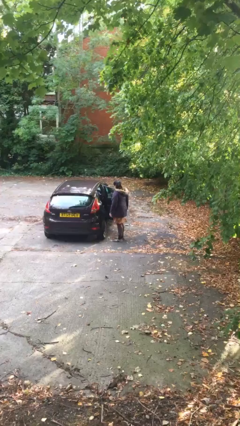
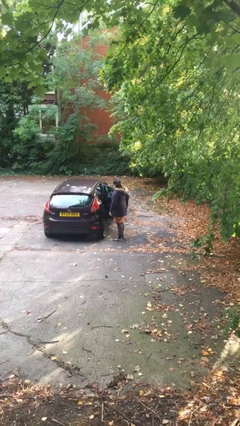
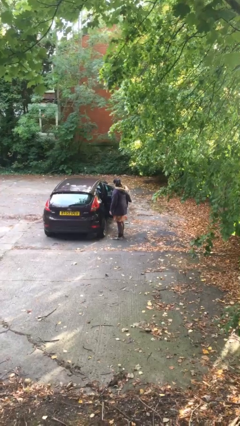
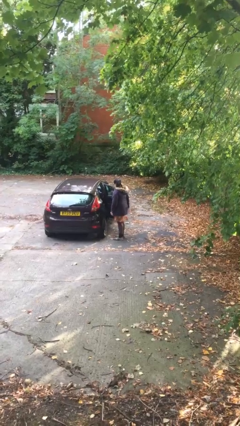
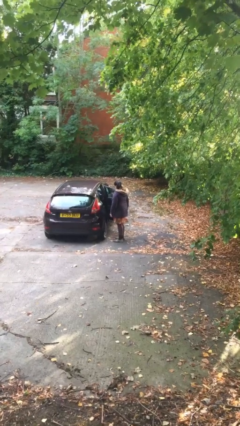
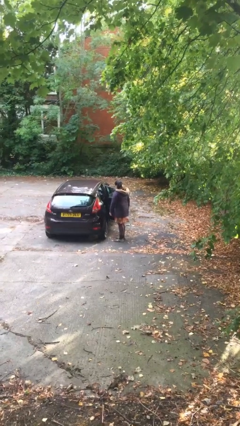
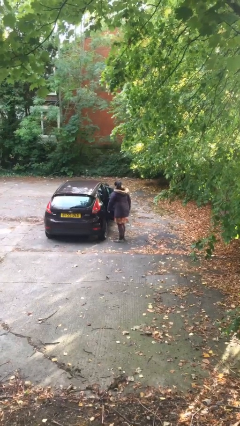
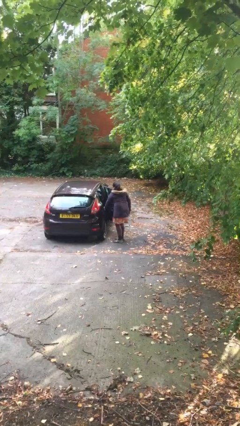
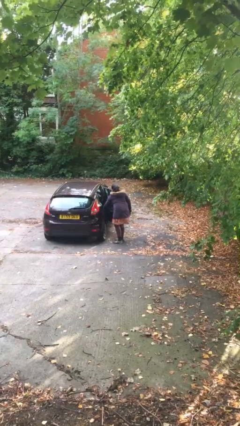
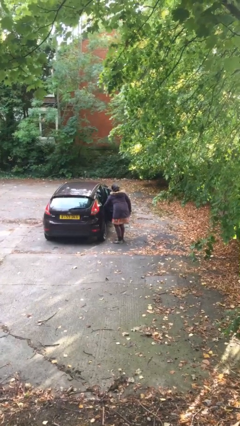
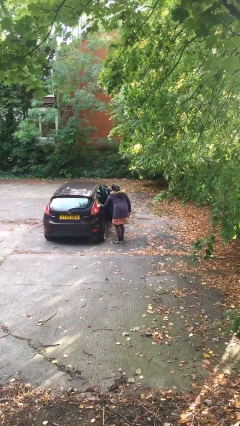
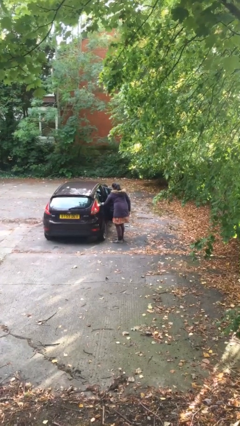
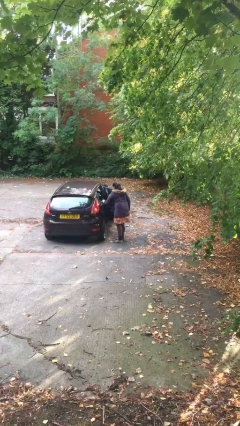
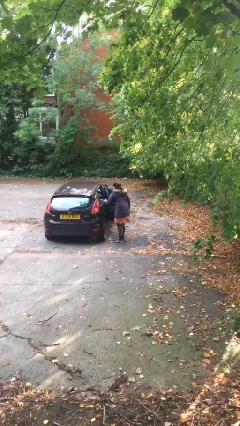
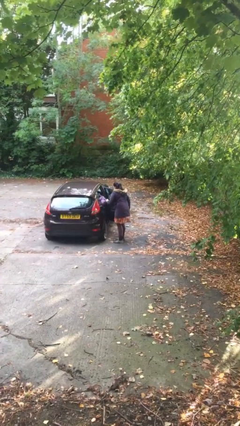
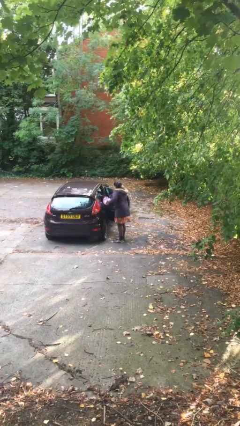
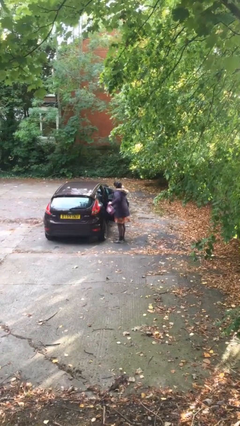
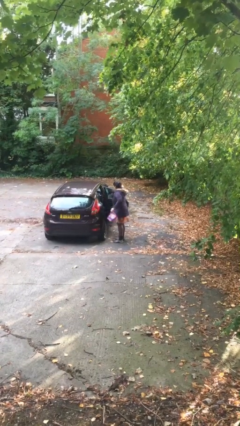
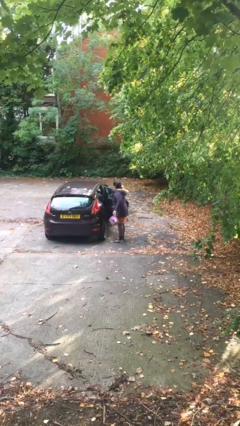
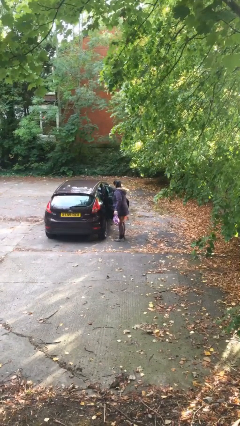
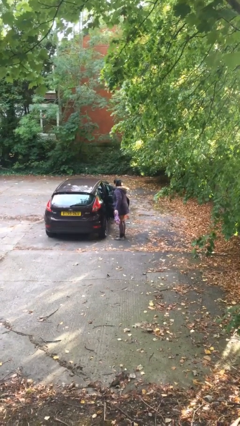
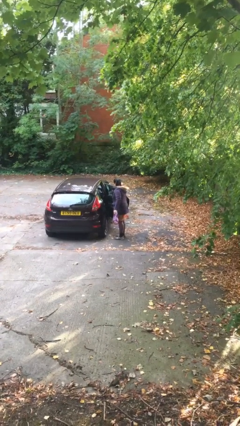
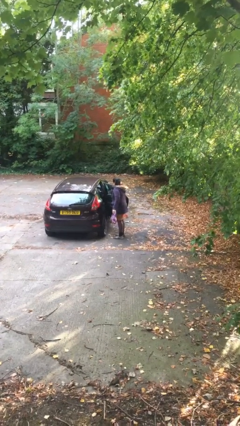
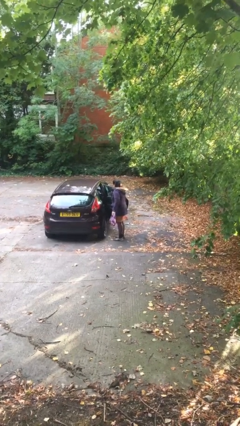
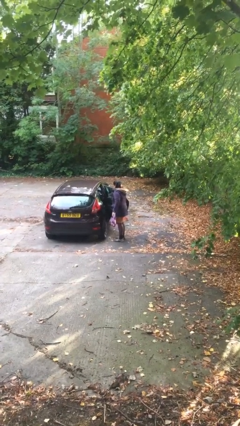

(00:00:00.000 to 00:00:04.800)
person unloads car

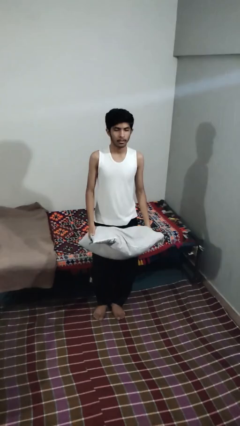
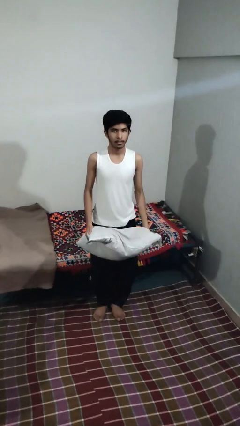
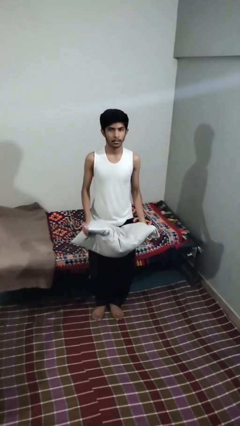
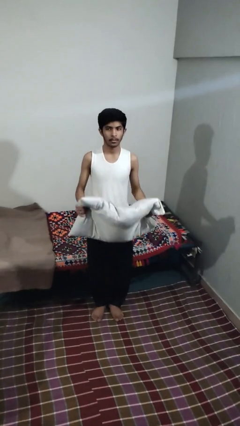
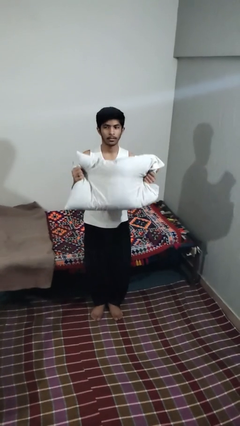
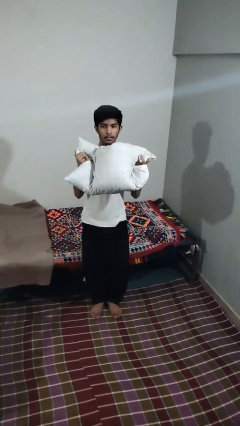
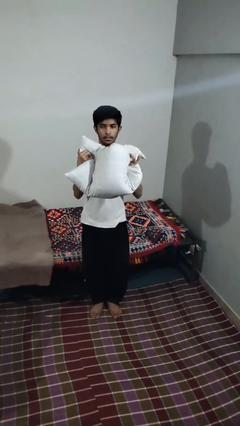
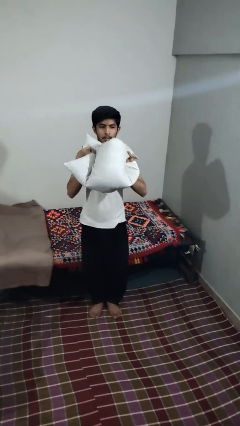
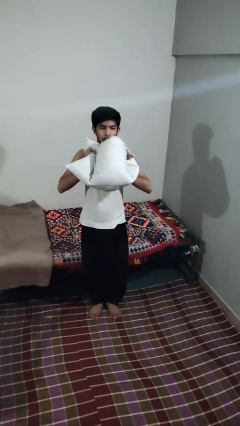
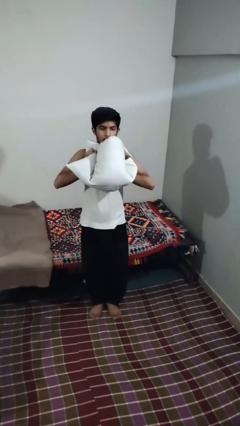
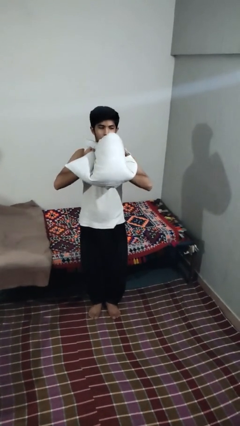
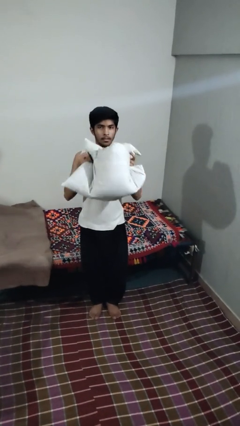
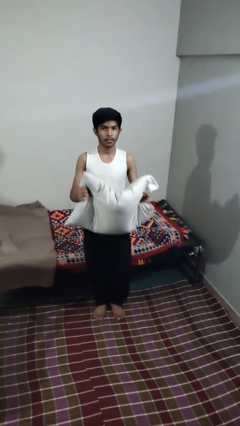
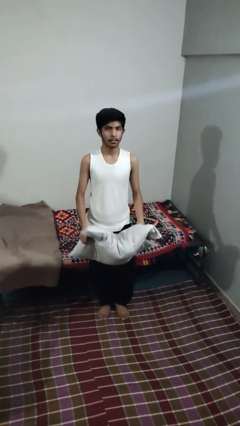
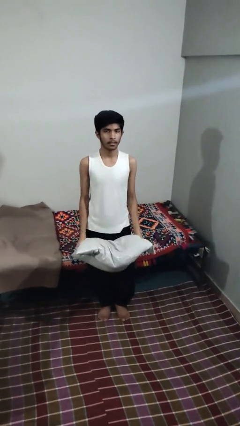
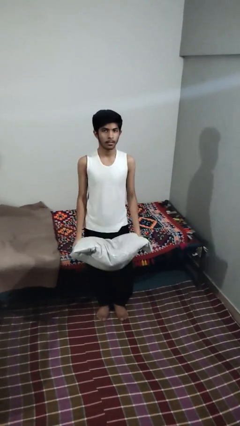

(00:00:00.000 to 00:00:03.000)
person squeezes object

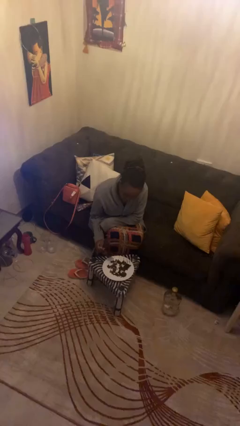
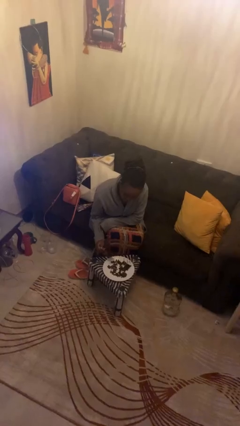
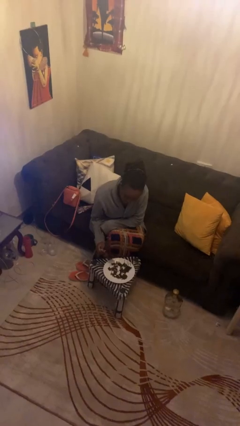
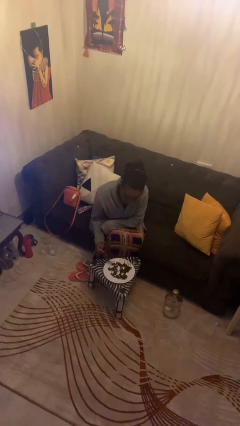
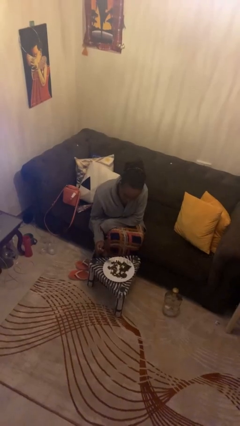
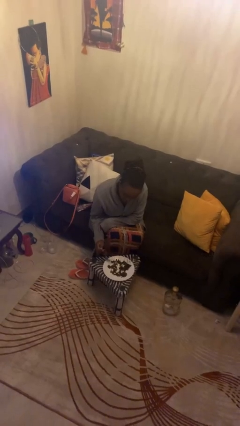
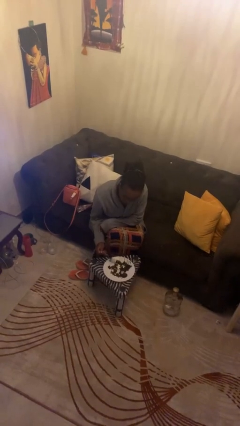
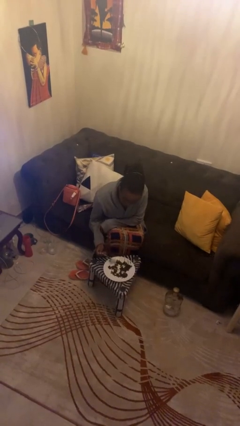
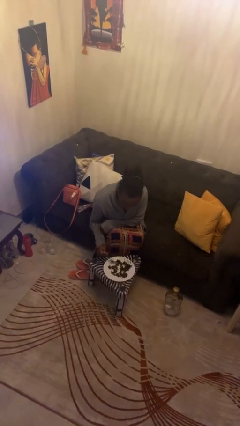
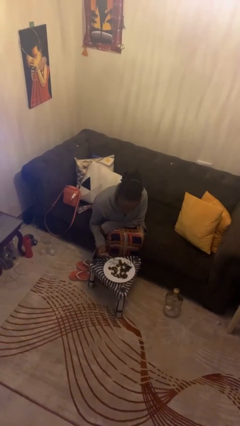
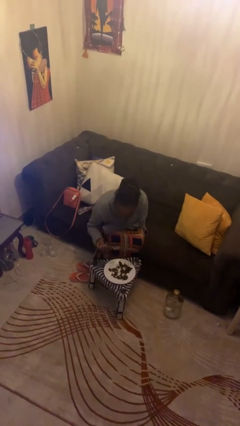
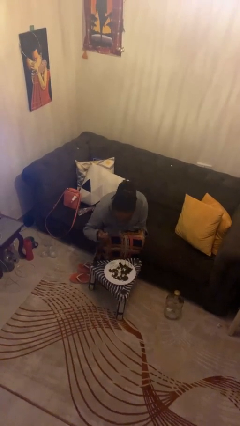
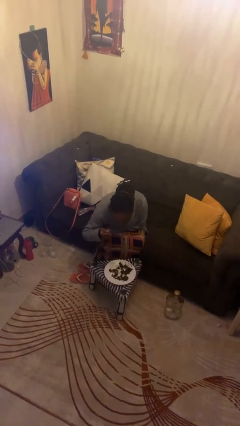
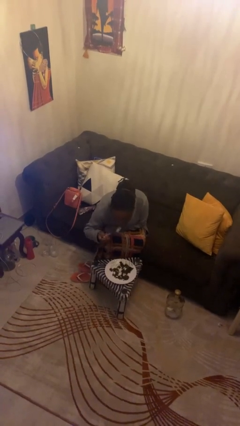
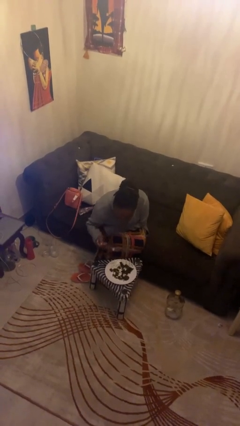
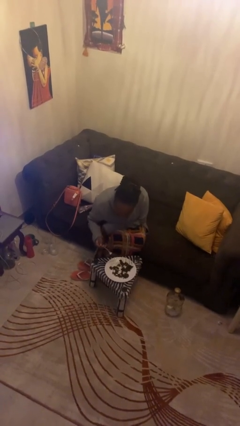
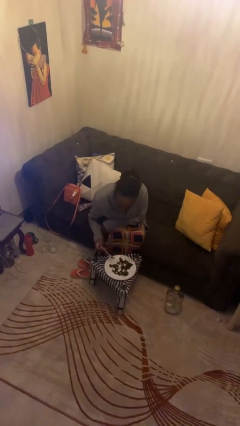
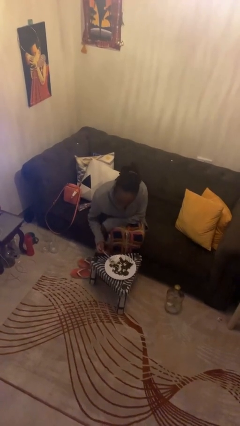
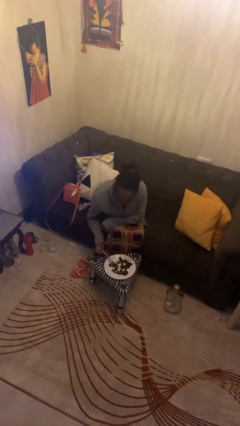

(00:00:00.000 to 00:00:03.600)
person eats with utensil

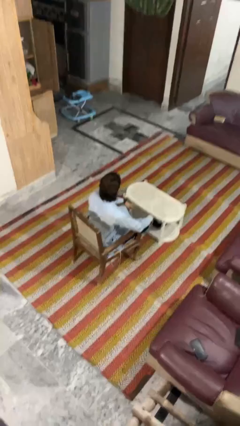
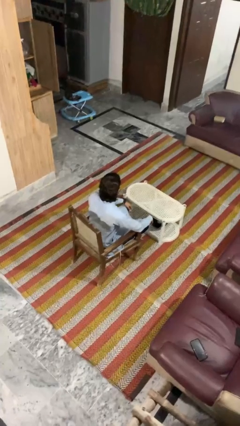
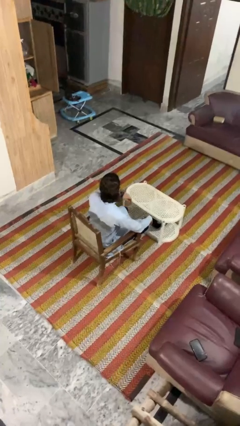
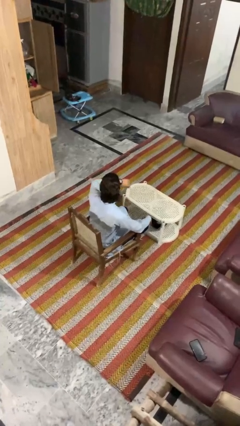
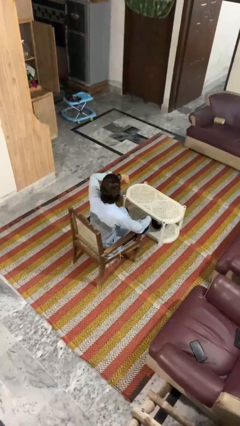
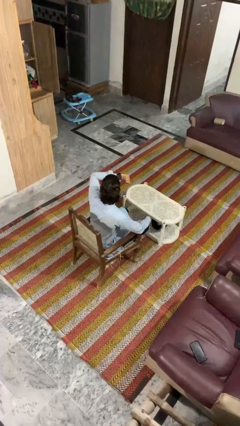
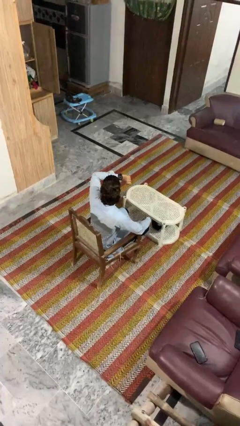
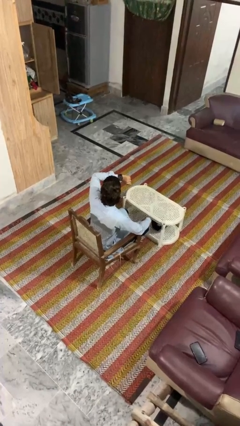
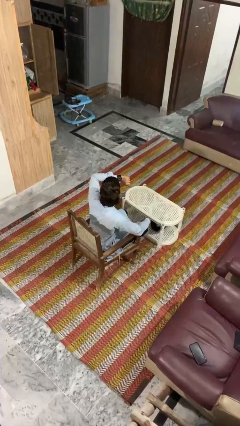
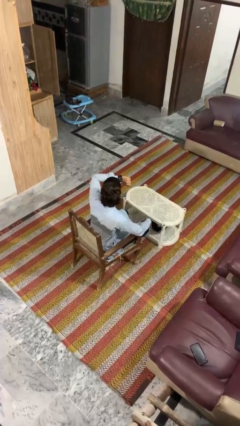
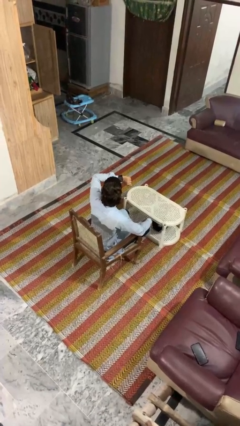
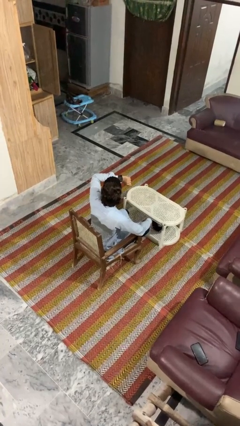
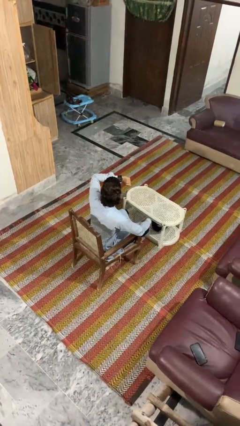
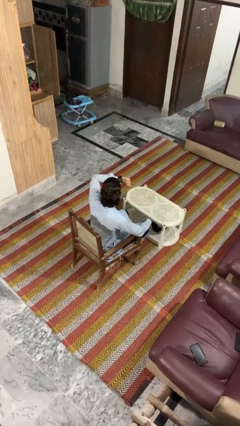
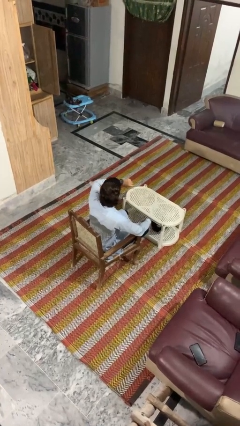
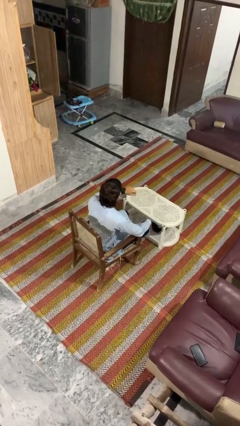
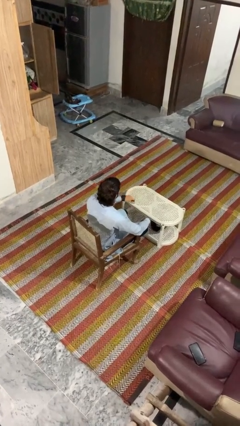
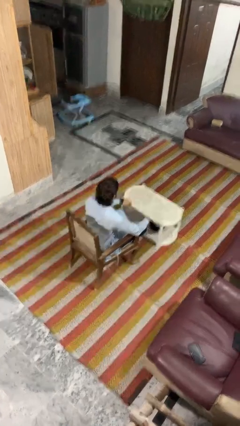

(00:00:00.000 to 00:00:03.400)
person looks at wristwatch

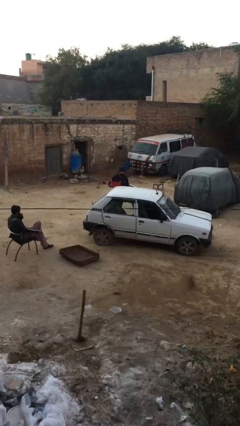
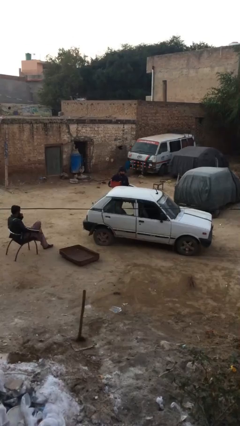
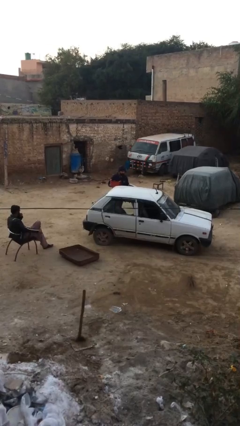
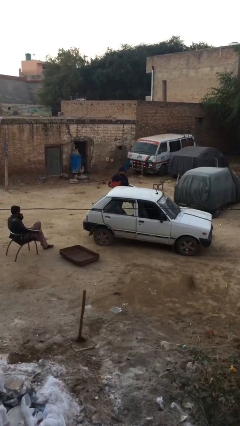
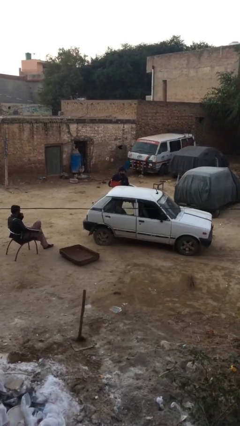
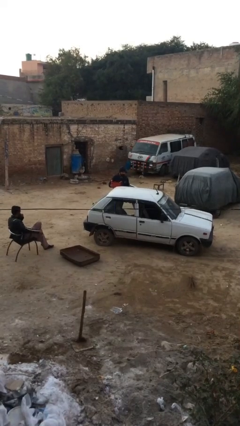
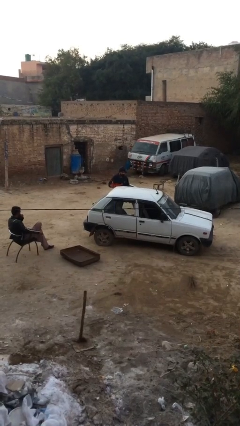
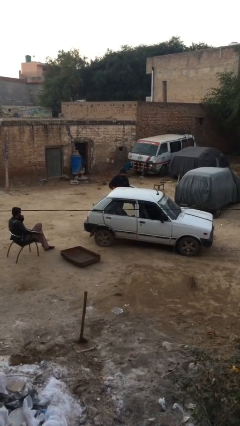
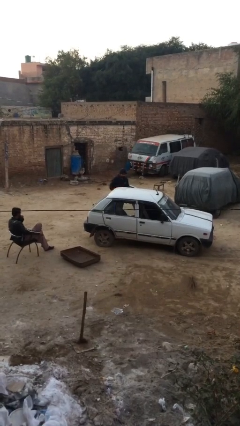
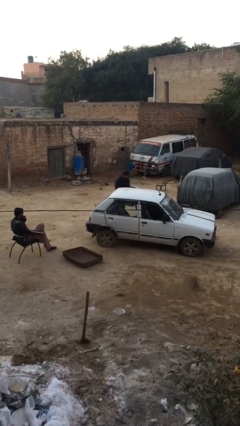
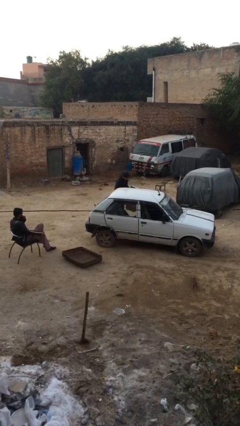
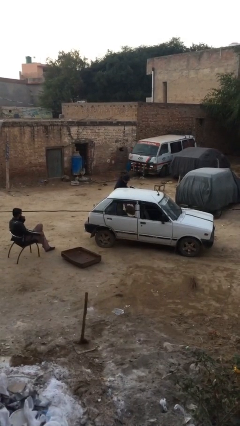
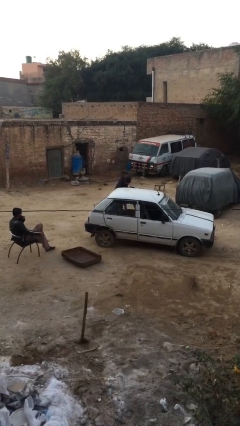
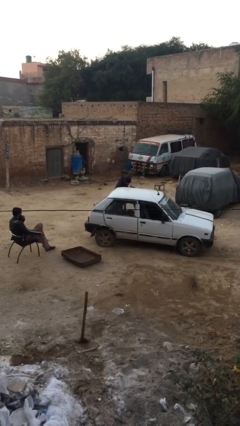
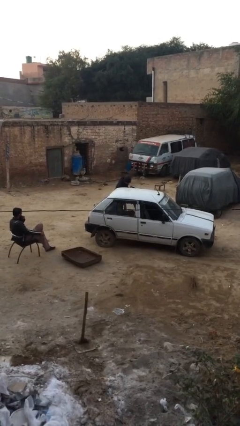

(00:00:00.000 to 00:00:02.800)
person loads car
